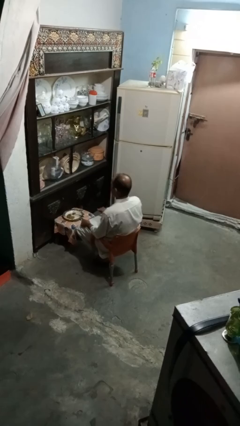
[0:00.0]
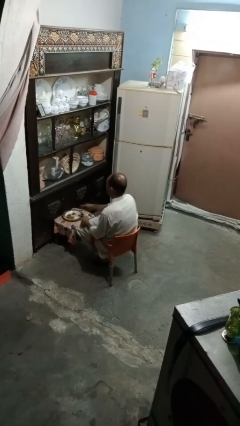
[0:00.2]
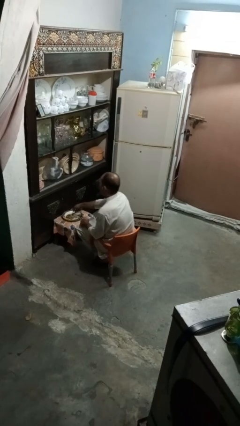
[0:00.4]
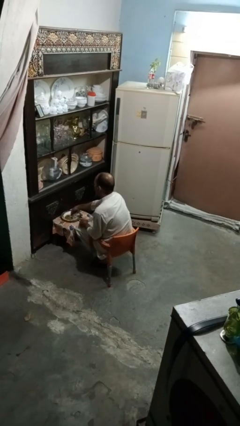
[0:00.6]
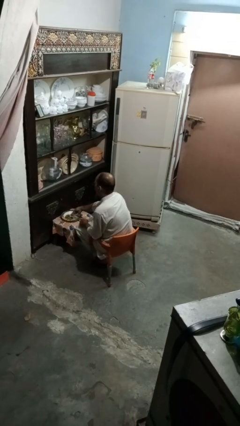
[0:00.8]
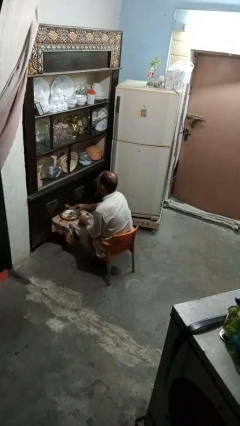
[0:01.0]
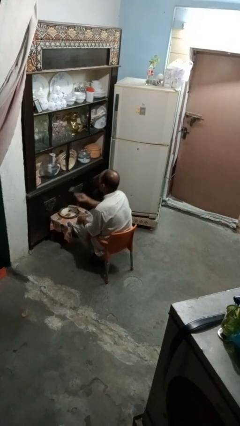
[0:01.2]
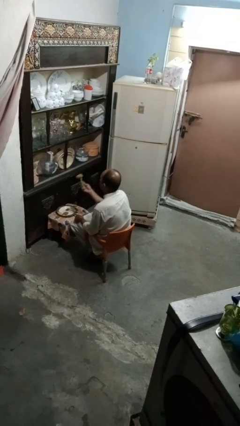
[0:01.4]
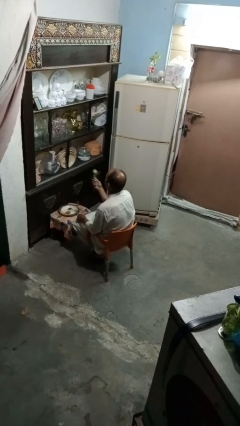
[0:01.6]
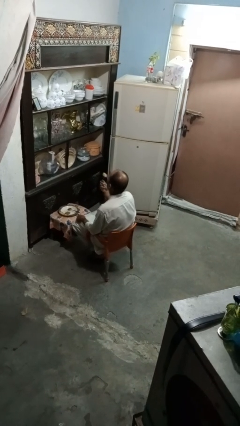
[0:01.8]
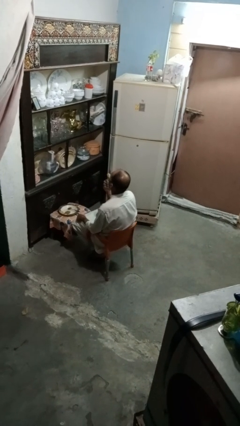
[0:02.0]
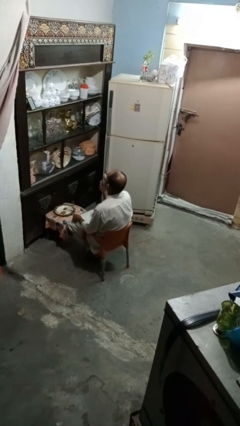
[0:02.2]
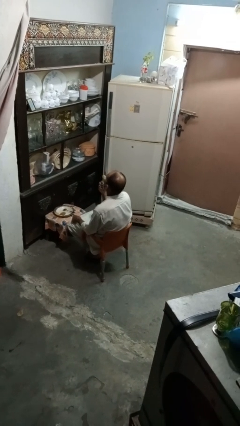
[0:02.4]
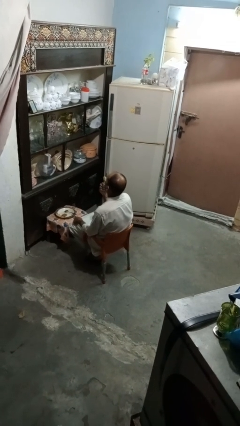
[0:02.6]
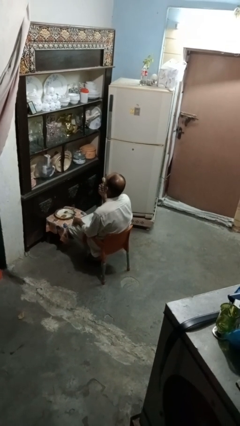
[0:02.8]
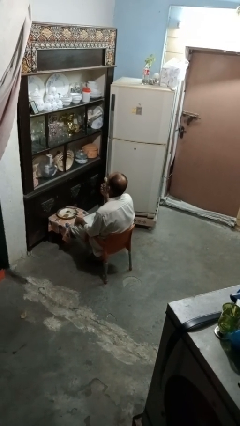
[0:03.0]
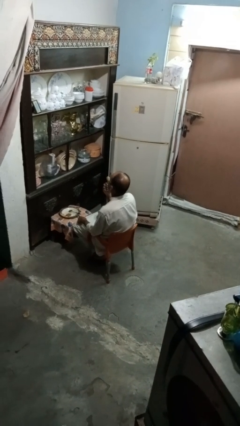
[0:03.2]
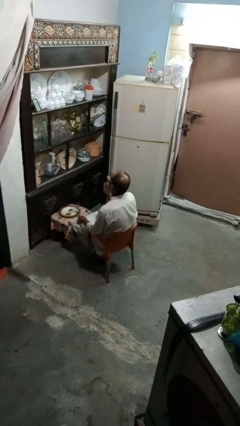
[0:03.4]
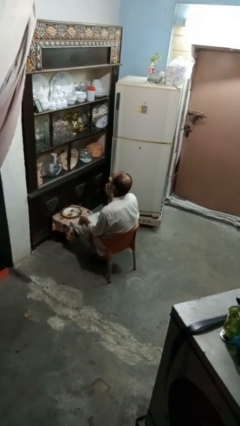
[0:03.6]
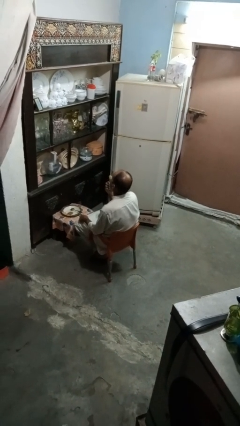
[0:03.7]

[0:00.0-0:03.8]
person eats with utensil

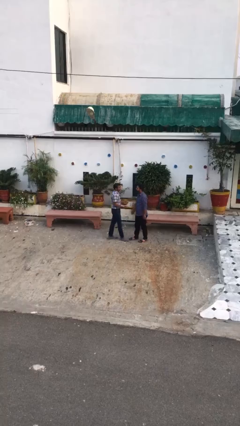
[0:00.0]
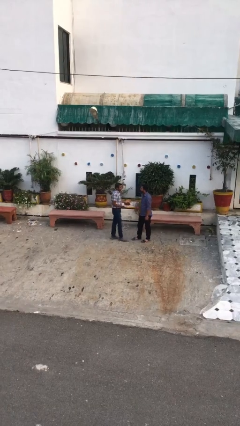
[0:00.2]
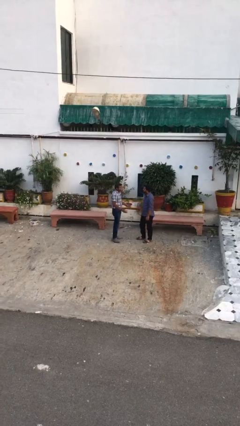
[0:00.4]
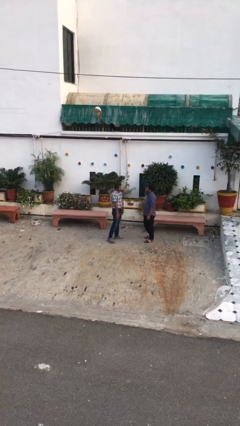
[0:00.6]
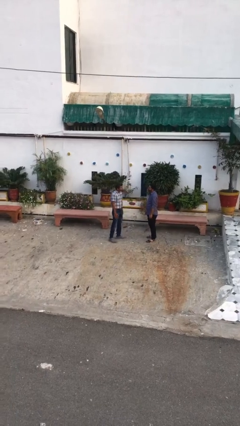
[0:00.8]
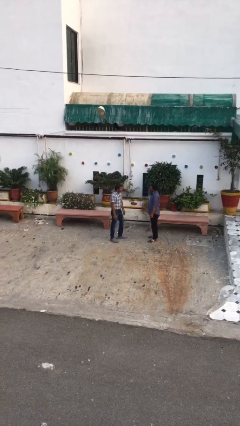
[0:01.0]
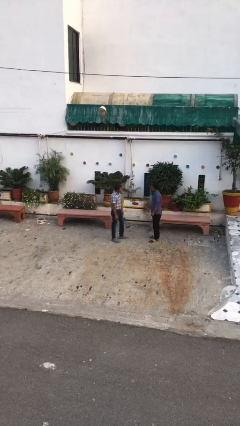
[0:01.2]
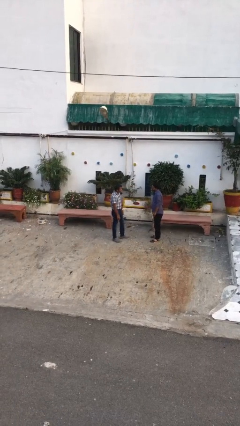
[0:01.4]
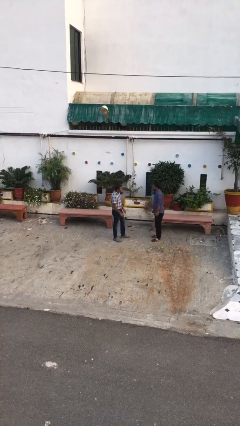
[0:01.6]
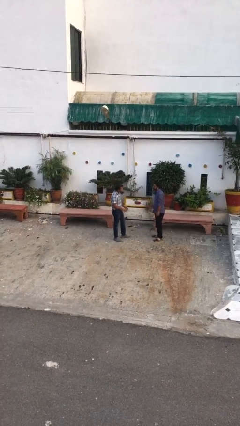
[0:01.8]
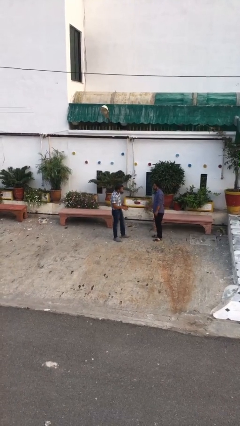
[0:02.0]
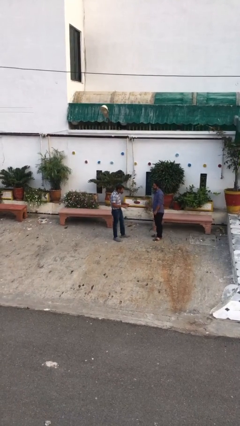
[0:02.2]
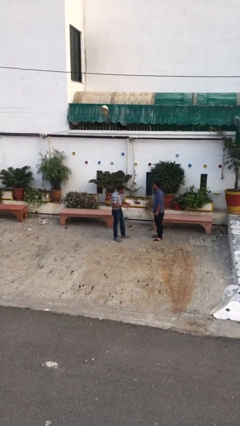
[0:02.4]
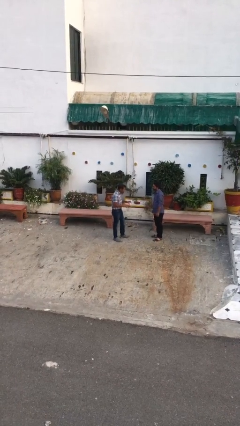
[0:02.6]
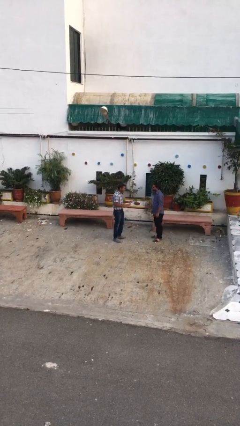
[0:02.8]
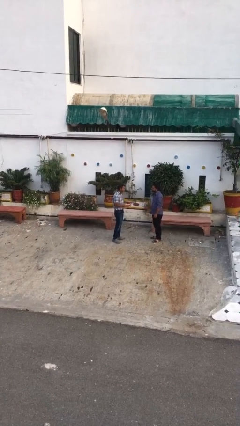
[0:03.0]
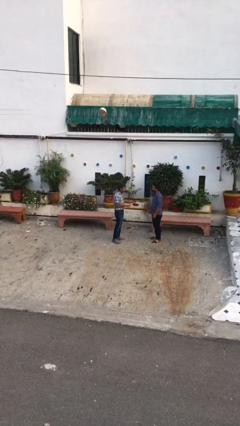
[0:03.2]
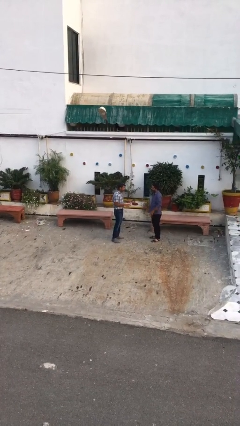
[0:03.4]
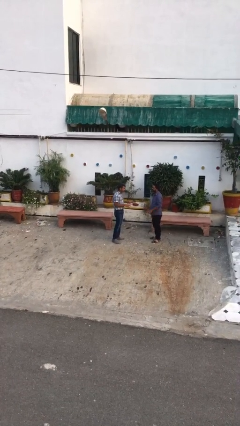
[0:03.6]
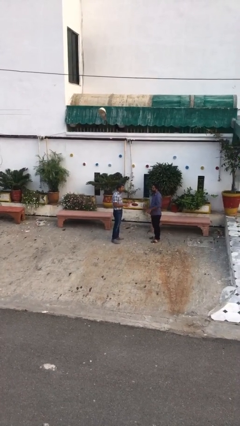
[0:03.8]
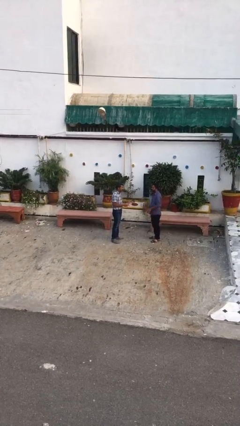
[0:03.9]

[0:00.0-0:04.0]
person talks to person

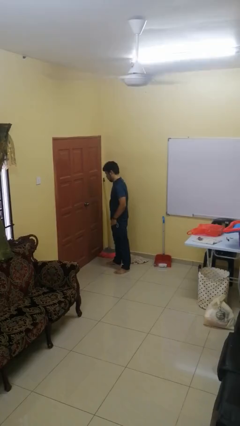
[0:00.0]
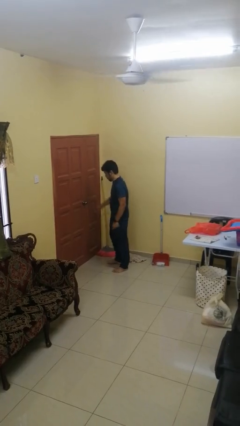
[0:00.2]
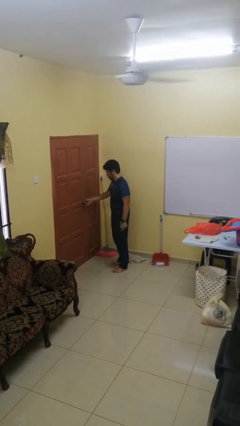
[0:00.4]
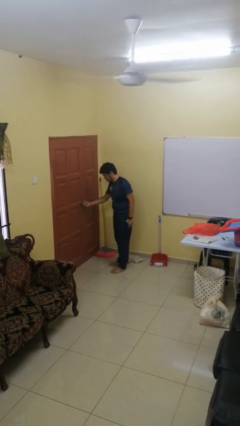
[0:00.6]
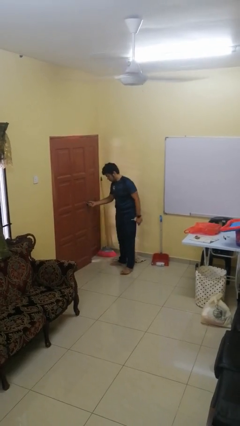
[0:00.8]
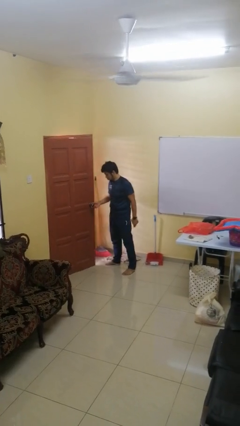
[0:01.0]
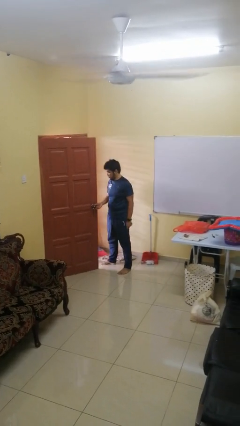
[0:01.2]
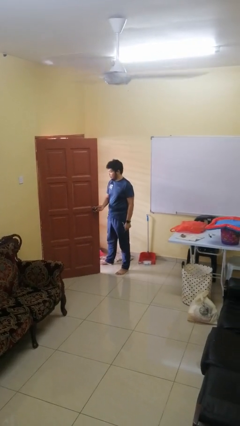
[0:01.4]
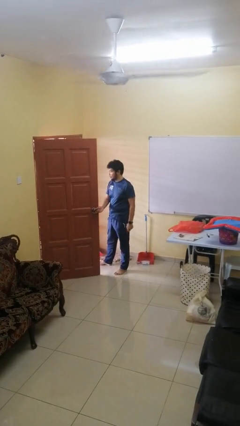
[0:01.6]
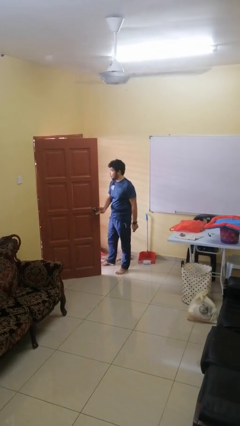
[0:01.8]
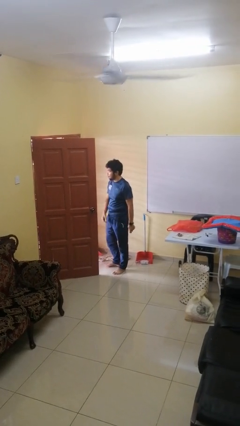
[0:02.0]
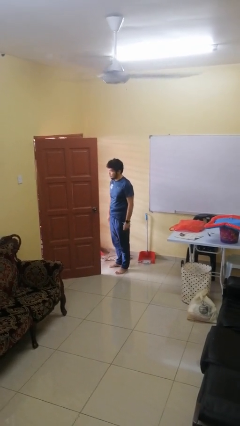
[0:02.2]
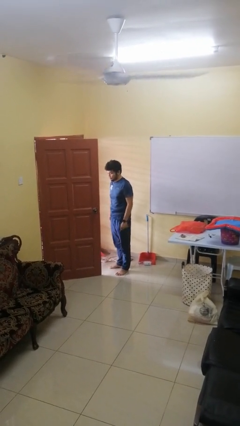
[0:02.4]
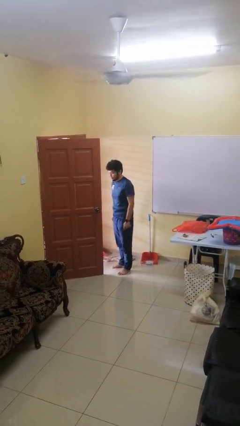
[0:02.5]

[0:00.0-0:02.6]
person opens facility door

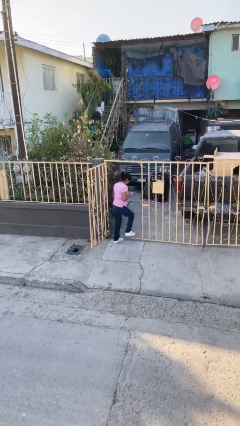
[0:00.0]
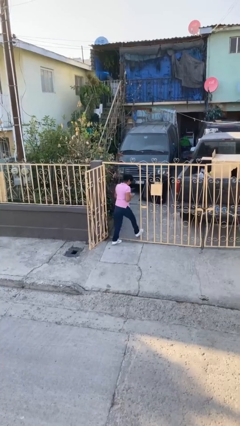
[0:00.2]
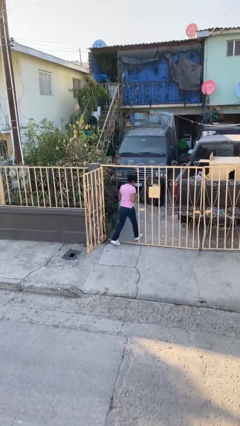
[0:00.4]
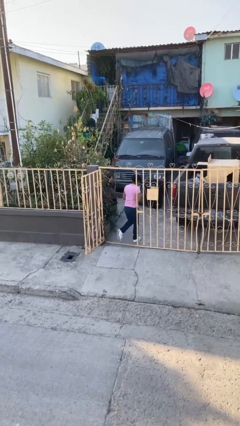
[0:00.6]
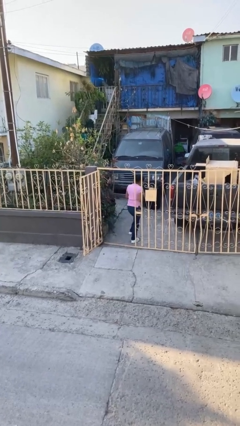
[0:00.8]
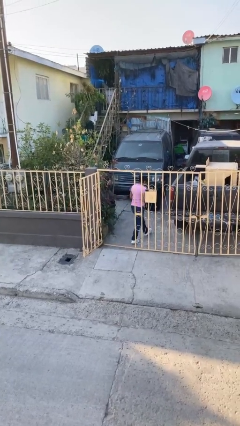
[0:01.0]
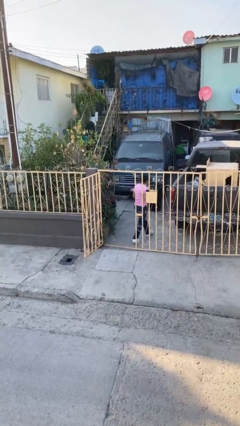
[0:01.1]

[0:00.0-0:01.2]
person exits scene through structure

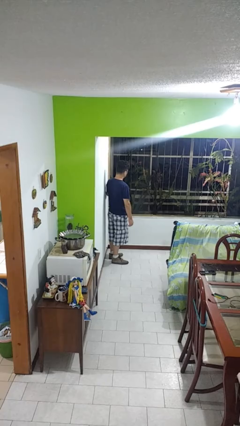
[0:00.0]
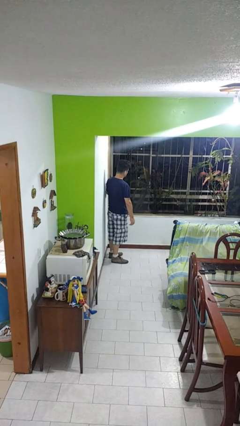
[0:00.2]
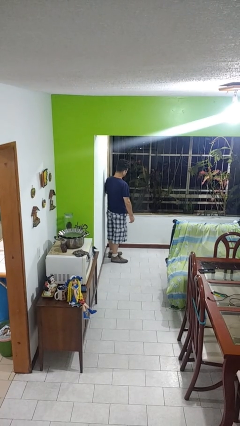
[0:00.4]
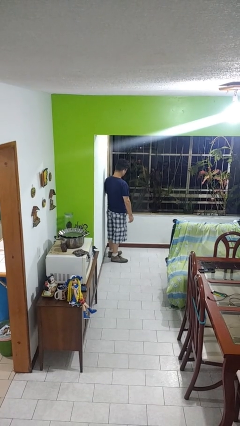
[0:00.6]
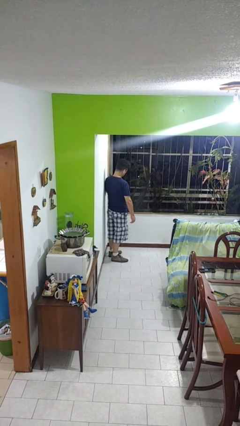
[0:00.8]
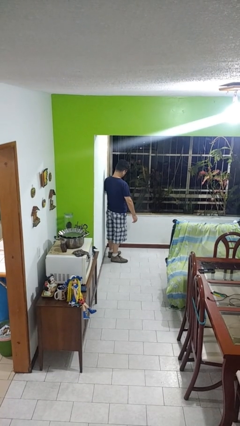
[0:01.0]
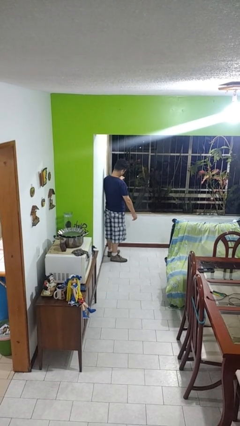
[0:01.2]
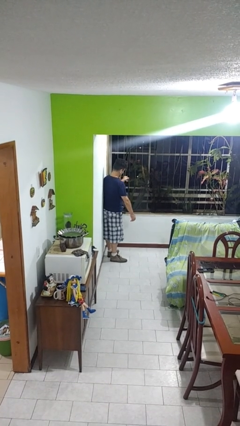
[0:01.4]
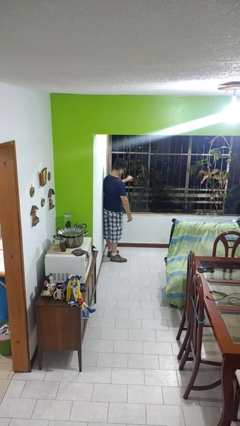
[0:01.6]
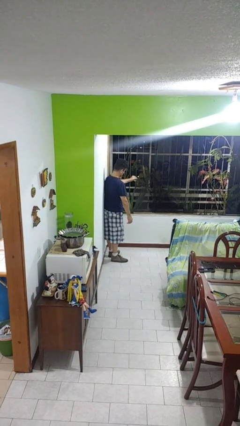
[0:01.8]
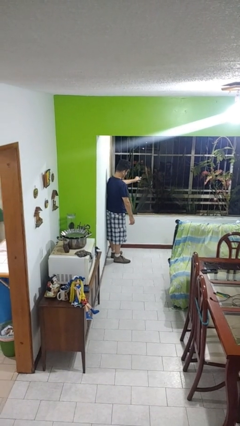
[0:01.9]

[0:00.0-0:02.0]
person opens home window

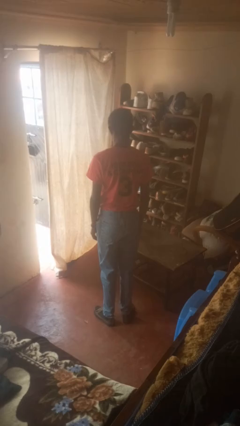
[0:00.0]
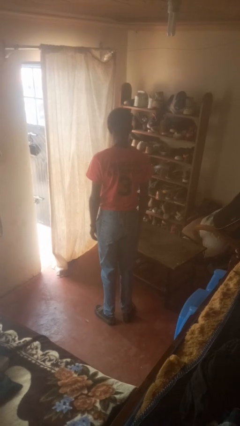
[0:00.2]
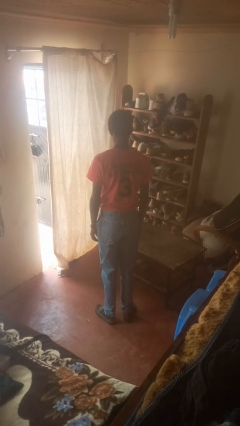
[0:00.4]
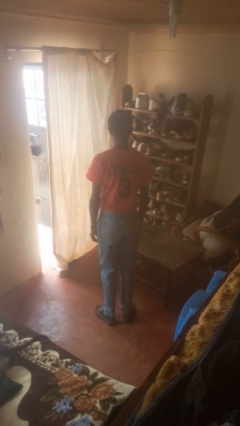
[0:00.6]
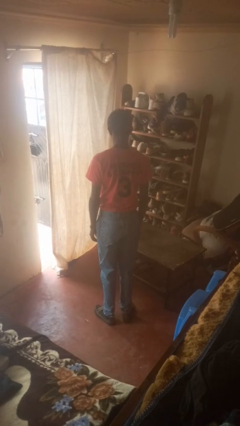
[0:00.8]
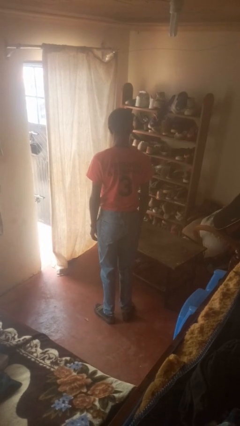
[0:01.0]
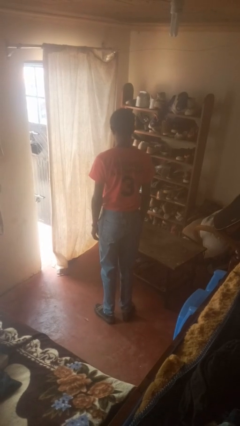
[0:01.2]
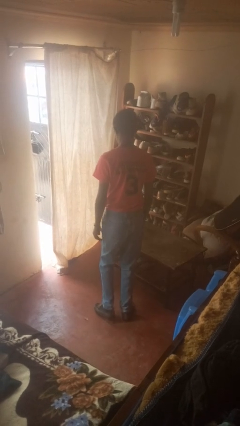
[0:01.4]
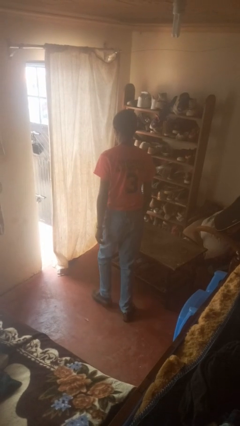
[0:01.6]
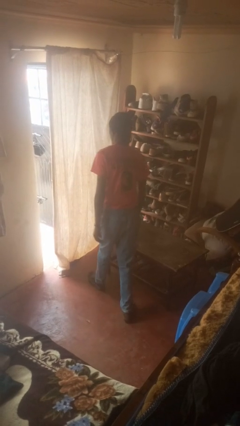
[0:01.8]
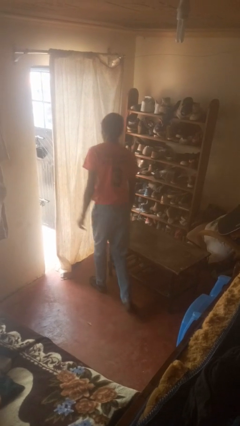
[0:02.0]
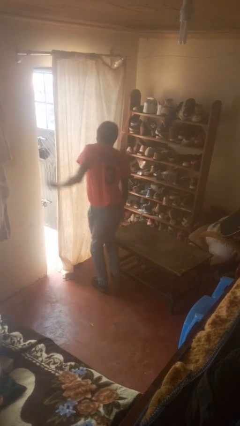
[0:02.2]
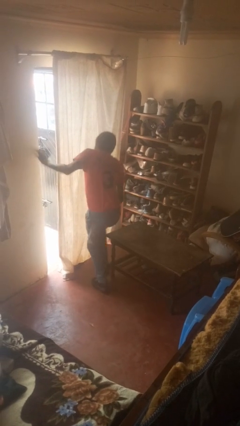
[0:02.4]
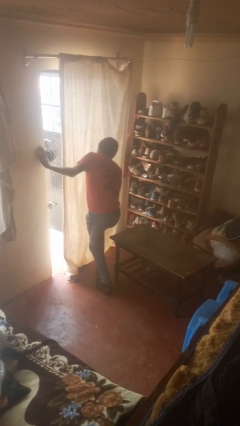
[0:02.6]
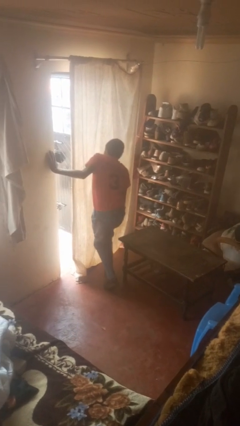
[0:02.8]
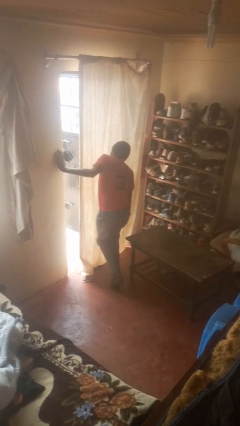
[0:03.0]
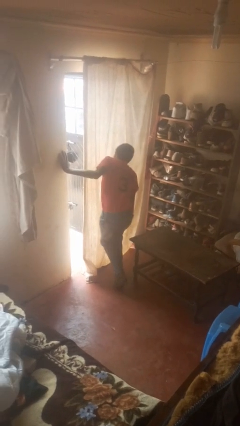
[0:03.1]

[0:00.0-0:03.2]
person bumps into table

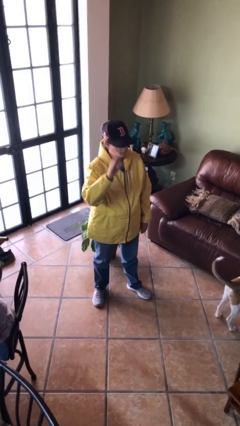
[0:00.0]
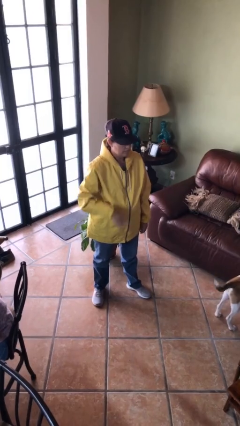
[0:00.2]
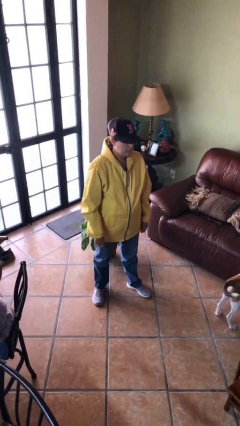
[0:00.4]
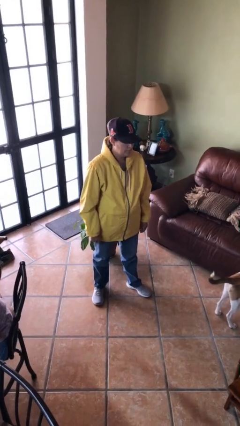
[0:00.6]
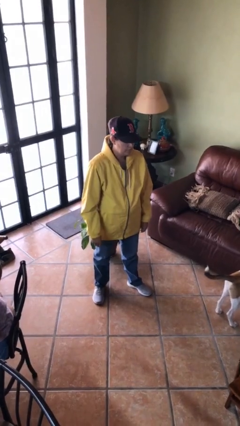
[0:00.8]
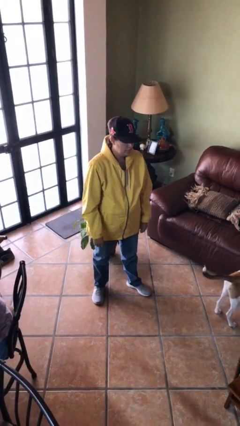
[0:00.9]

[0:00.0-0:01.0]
person gestures lower hand
